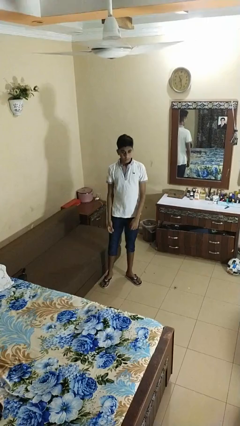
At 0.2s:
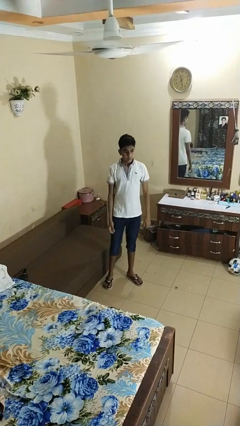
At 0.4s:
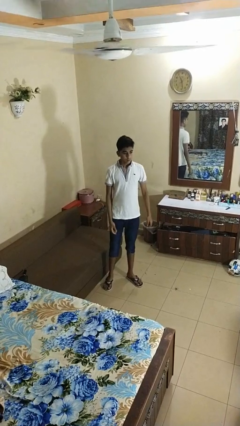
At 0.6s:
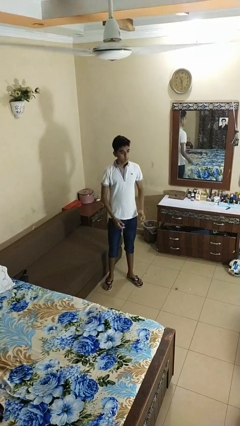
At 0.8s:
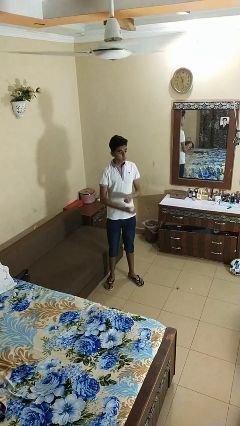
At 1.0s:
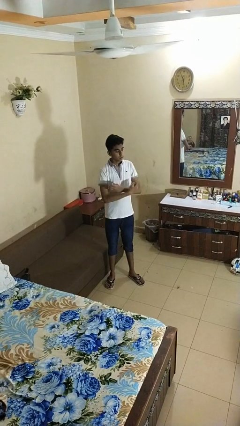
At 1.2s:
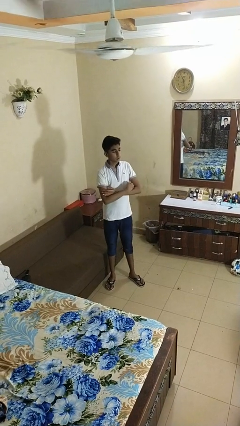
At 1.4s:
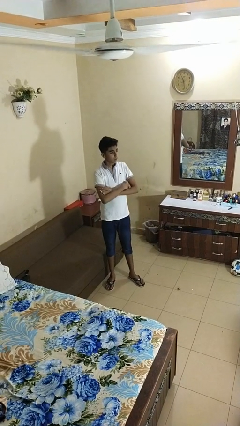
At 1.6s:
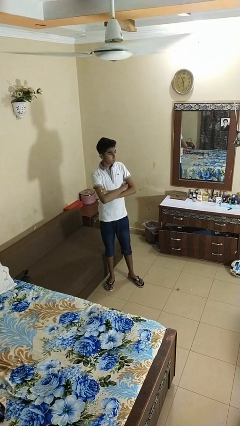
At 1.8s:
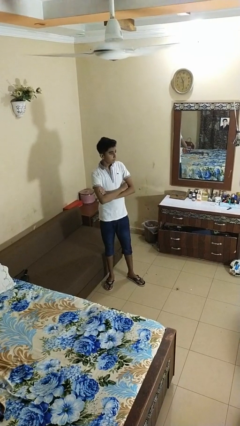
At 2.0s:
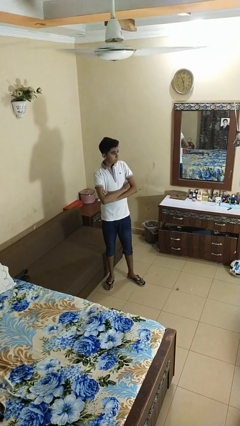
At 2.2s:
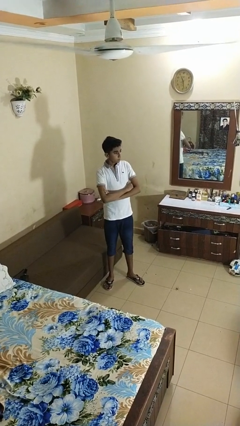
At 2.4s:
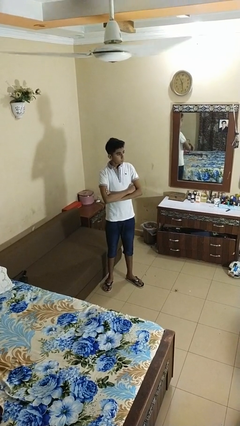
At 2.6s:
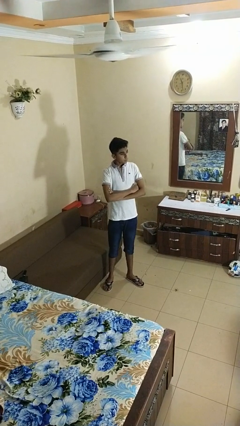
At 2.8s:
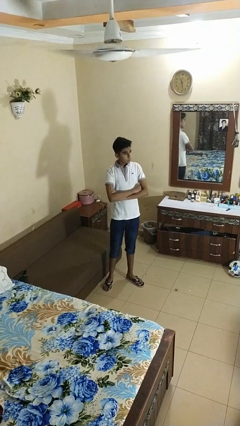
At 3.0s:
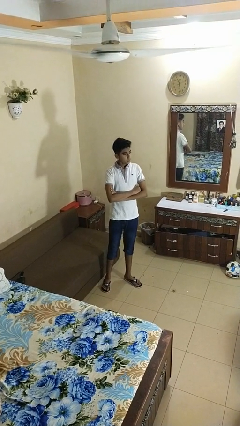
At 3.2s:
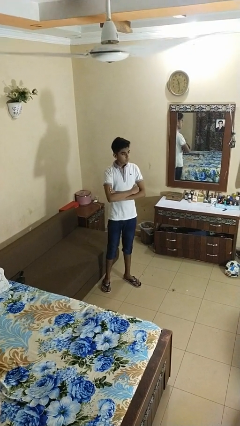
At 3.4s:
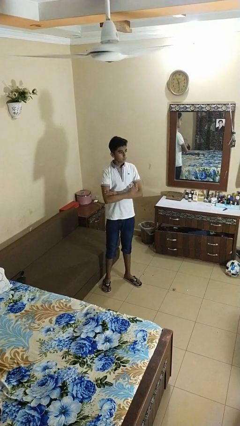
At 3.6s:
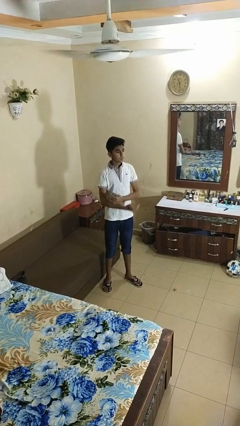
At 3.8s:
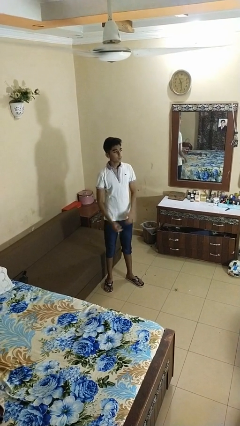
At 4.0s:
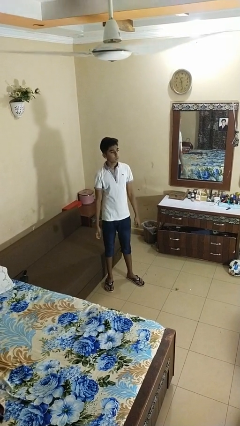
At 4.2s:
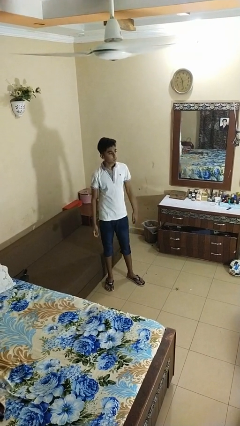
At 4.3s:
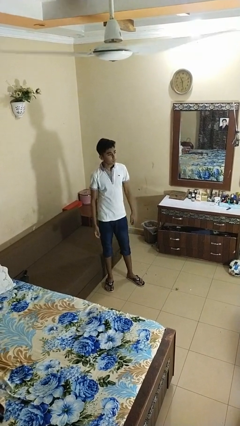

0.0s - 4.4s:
person crosses arms

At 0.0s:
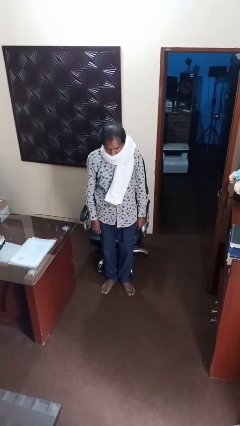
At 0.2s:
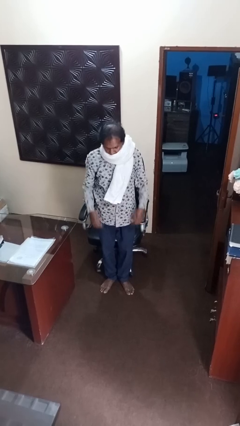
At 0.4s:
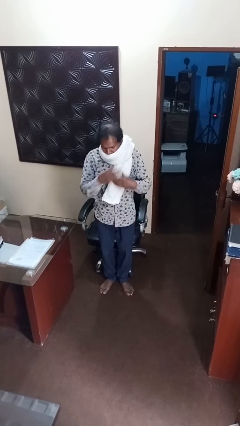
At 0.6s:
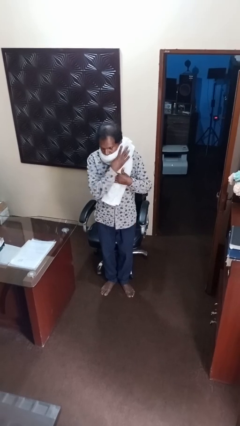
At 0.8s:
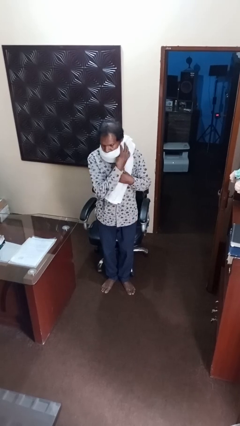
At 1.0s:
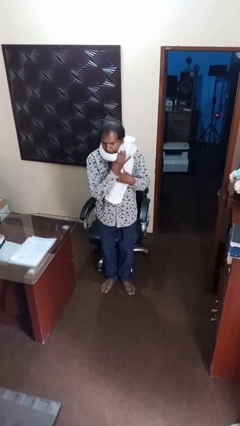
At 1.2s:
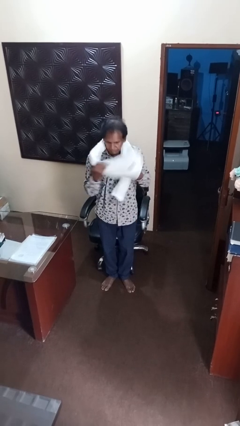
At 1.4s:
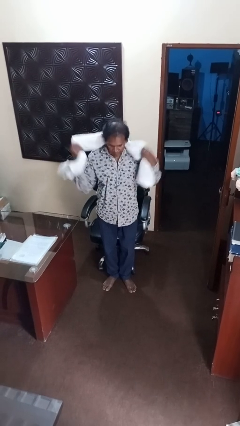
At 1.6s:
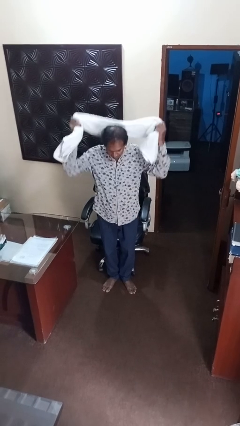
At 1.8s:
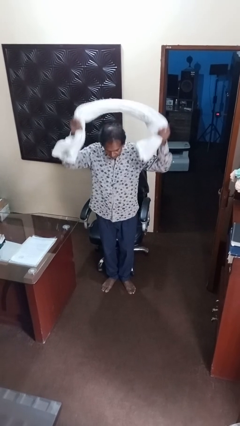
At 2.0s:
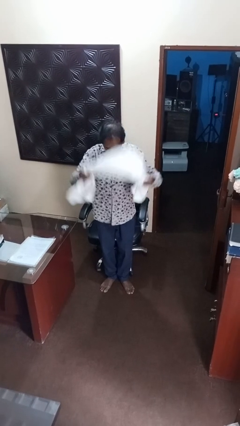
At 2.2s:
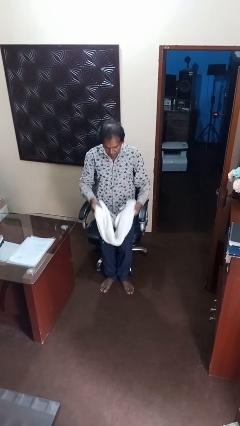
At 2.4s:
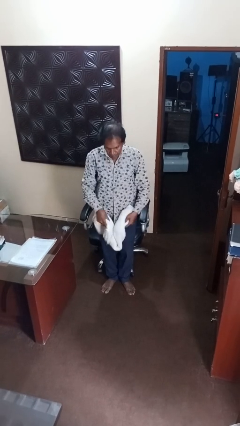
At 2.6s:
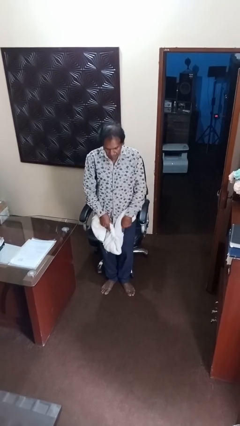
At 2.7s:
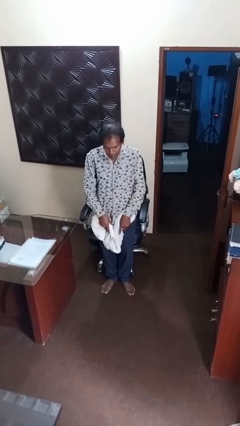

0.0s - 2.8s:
person takes off scarf

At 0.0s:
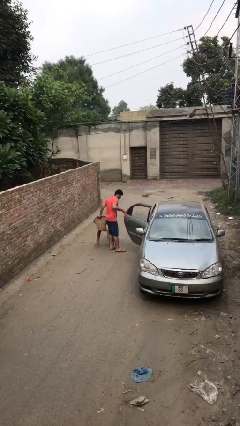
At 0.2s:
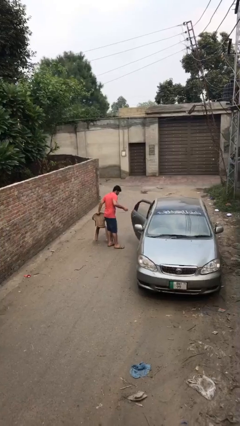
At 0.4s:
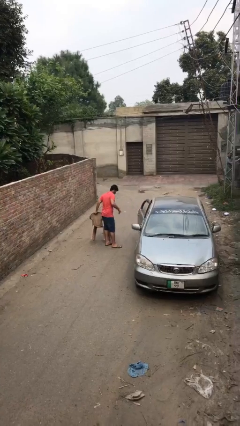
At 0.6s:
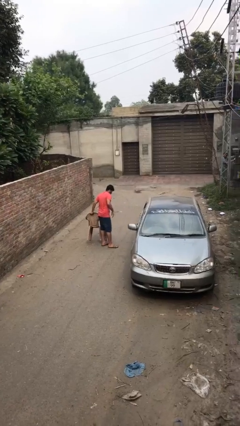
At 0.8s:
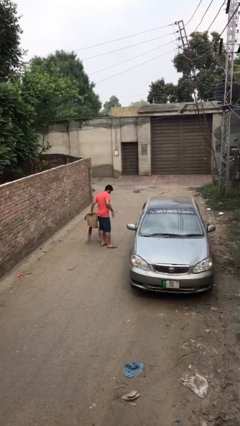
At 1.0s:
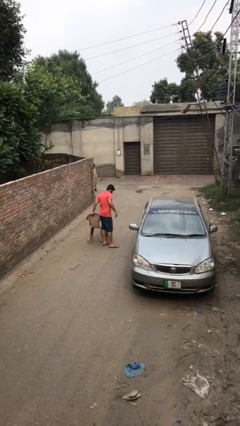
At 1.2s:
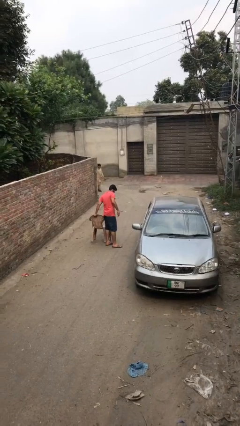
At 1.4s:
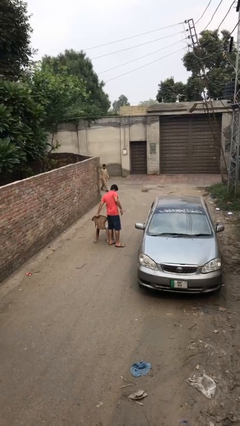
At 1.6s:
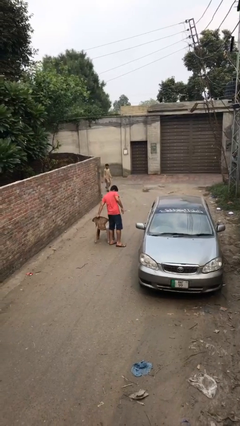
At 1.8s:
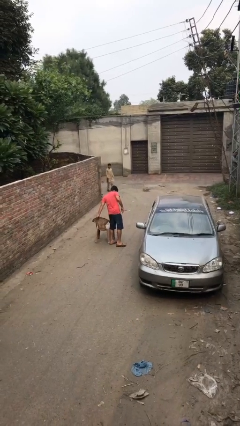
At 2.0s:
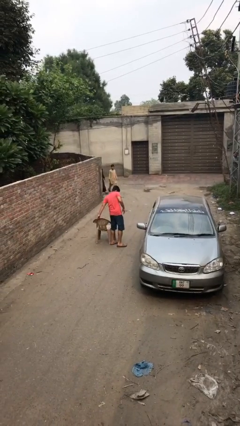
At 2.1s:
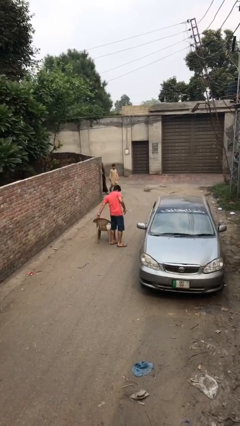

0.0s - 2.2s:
person closes car door

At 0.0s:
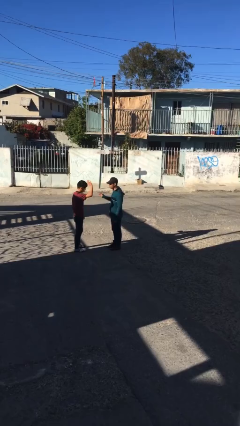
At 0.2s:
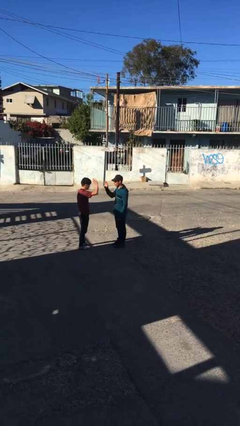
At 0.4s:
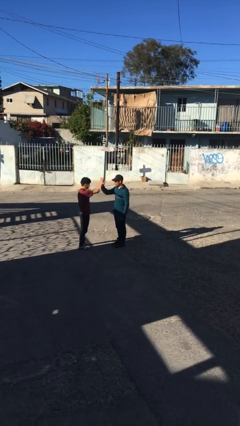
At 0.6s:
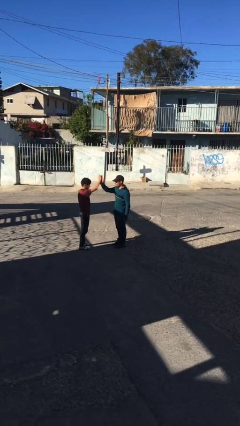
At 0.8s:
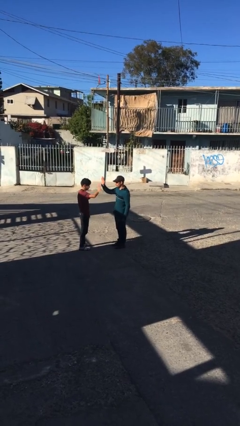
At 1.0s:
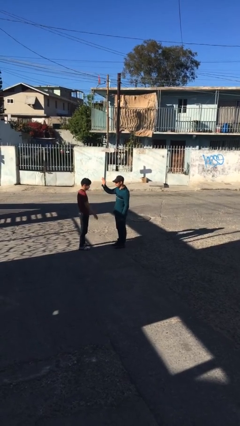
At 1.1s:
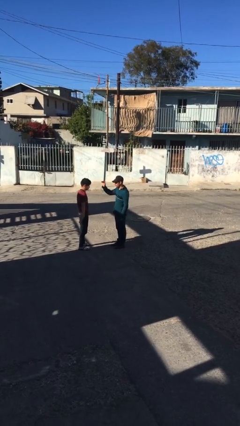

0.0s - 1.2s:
person highfives hand

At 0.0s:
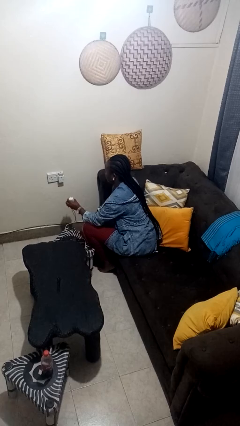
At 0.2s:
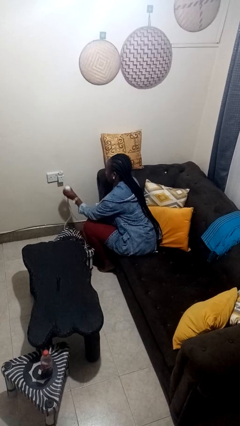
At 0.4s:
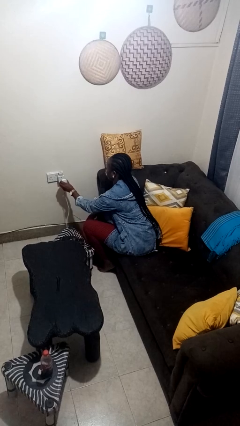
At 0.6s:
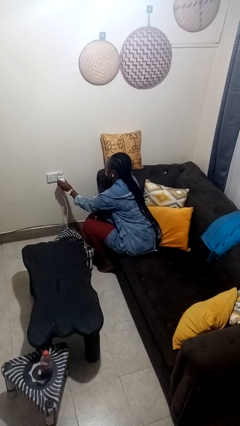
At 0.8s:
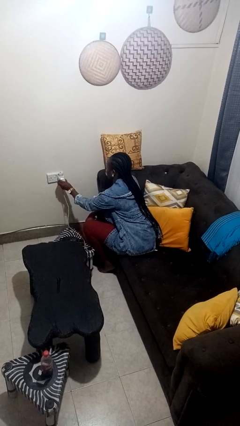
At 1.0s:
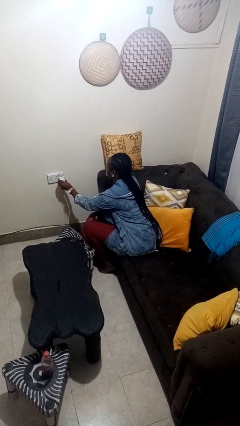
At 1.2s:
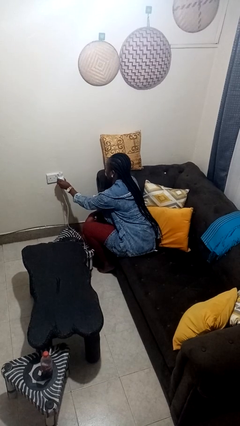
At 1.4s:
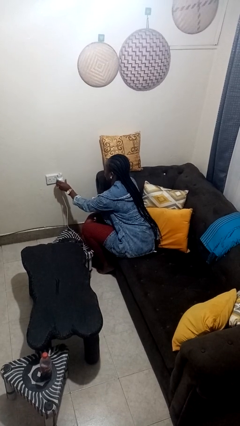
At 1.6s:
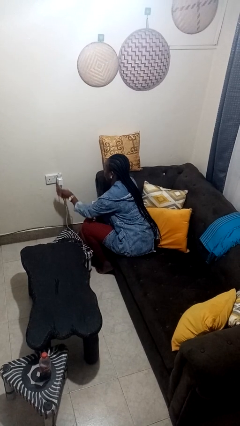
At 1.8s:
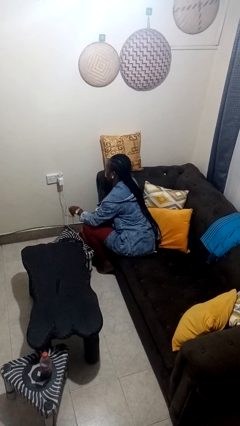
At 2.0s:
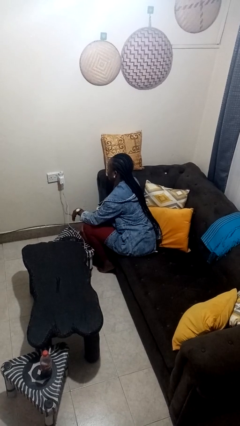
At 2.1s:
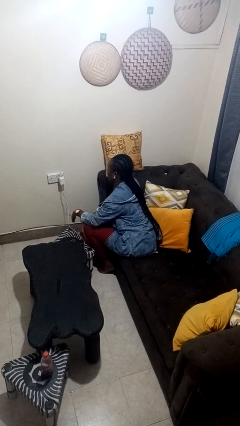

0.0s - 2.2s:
person plugs into electrical socket

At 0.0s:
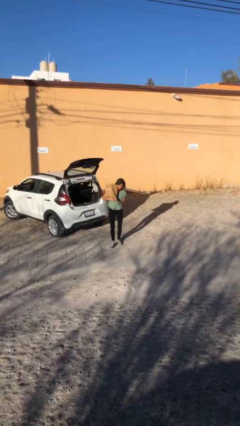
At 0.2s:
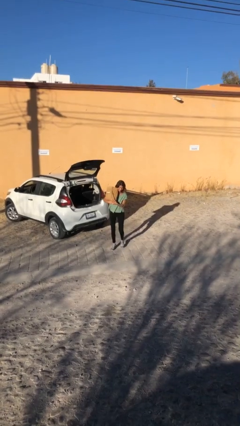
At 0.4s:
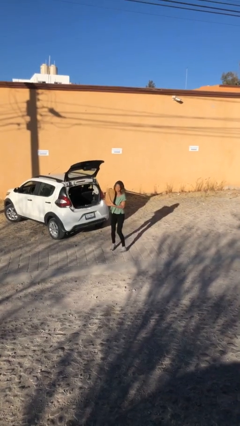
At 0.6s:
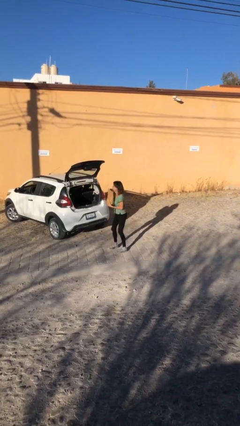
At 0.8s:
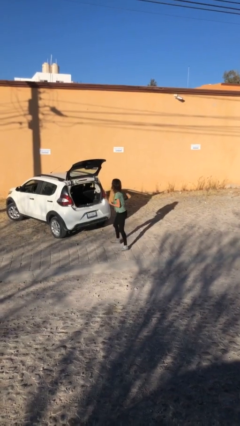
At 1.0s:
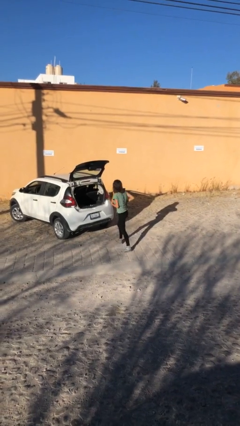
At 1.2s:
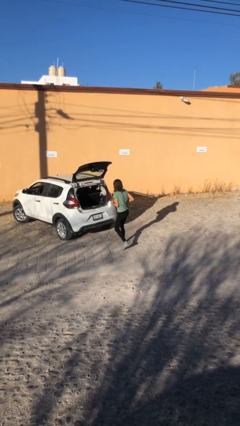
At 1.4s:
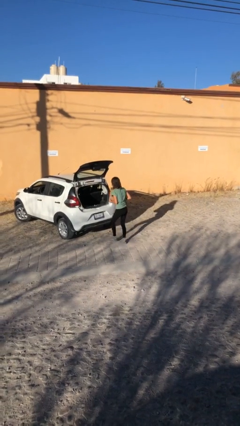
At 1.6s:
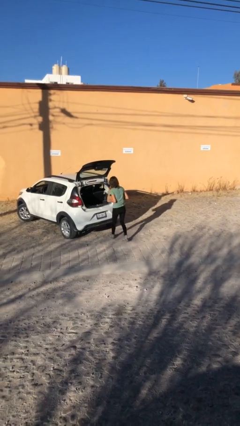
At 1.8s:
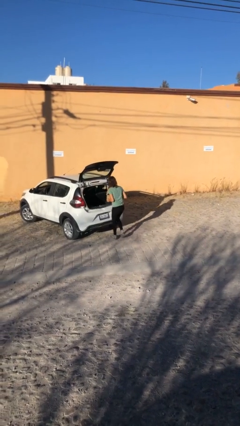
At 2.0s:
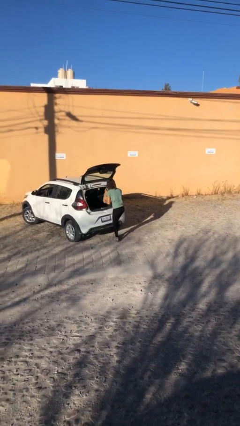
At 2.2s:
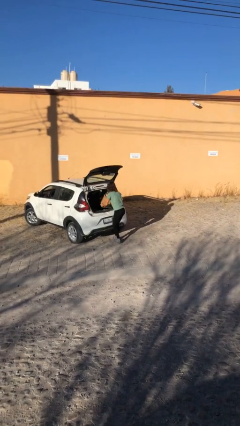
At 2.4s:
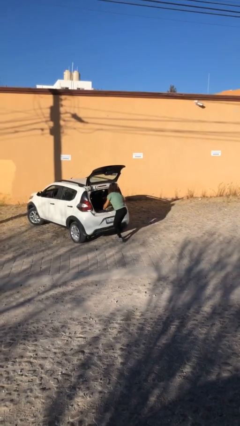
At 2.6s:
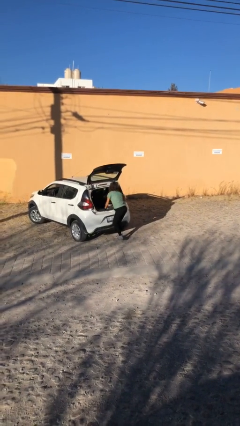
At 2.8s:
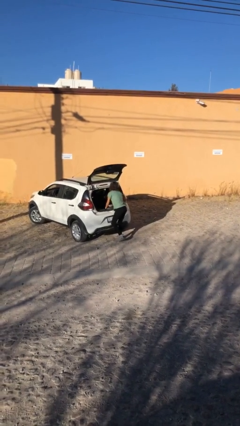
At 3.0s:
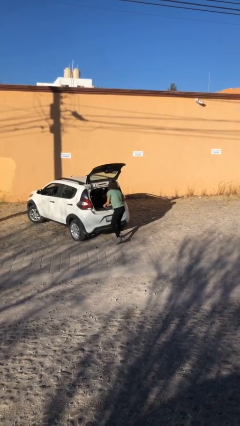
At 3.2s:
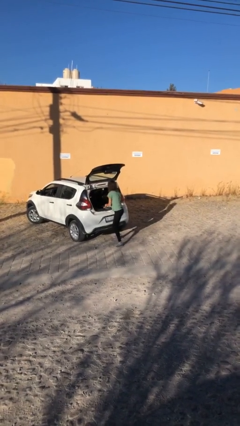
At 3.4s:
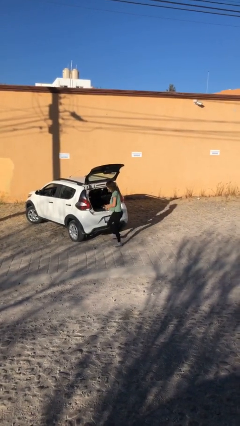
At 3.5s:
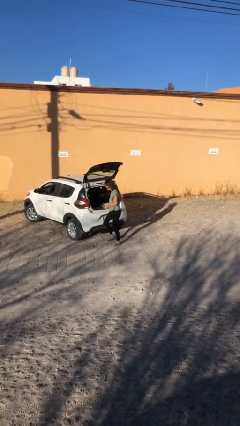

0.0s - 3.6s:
person loads car

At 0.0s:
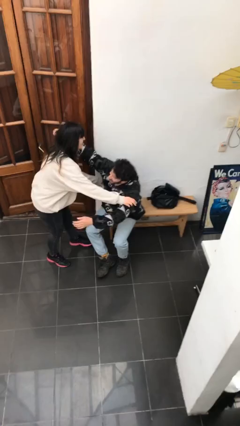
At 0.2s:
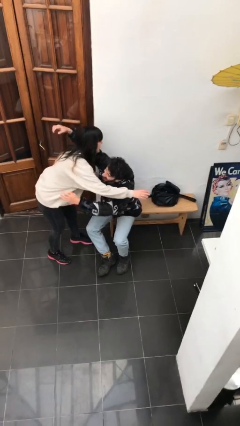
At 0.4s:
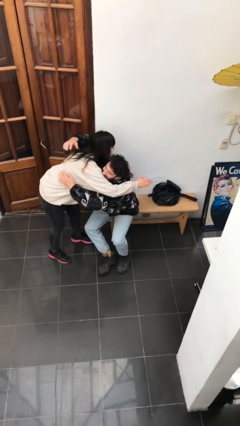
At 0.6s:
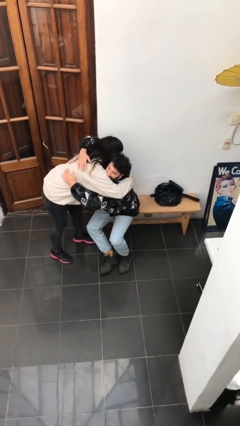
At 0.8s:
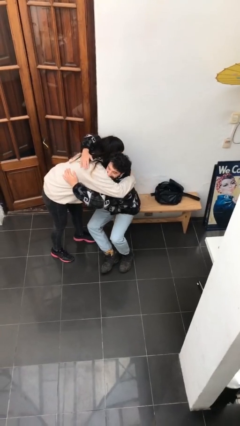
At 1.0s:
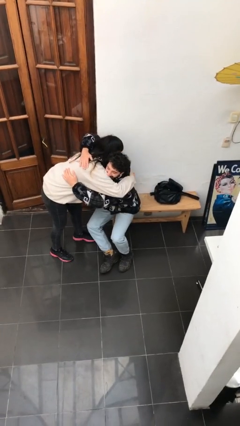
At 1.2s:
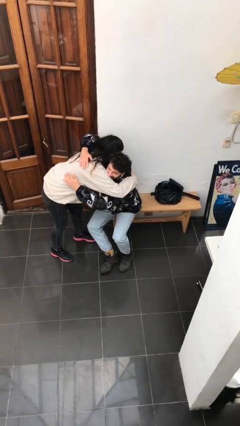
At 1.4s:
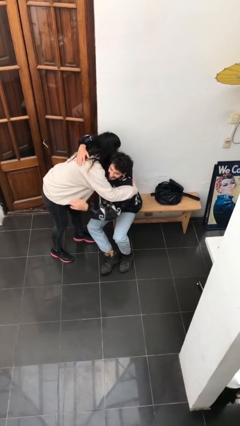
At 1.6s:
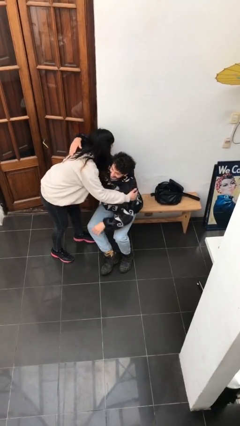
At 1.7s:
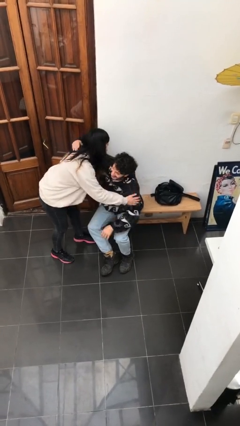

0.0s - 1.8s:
person embraces person
